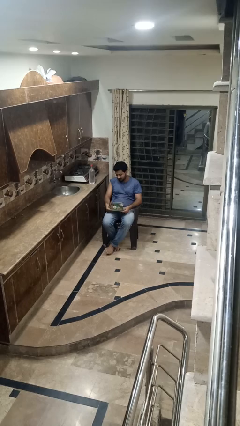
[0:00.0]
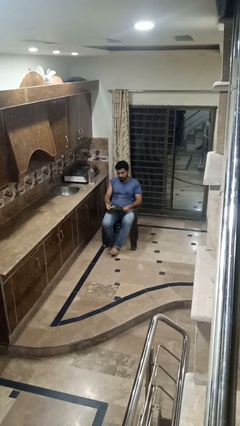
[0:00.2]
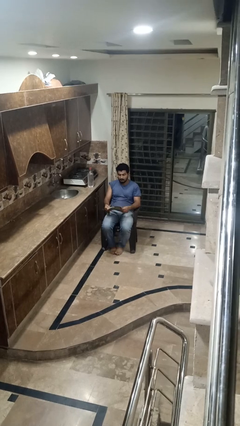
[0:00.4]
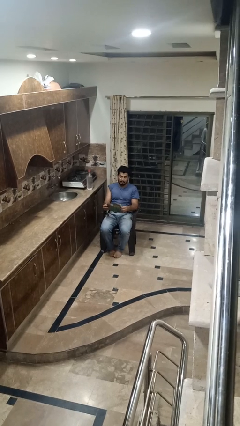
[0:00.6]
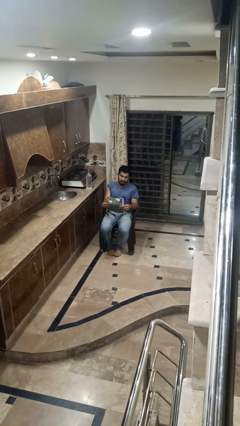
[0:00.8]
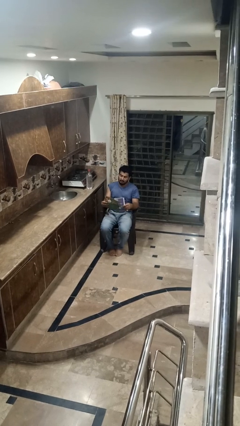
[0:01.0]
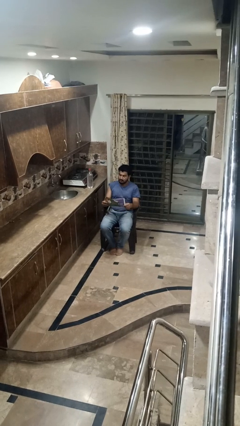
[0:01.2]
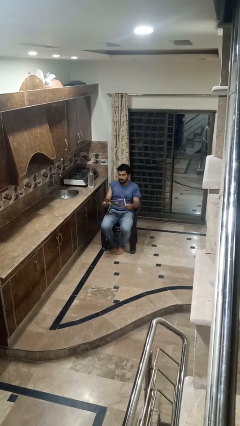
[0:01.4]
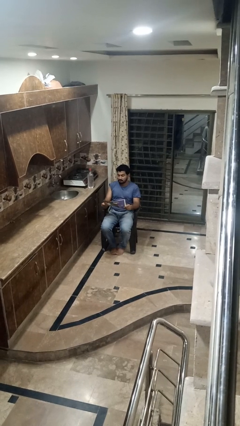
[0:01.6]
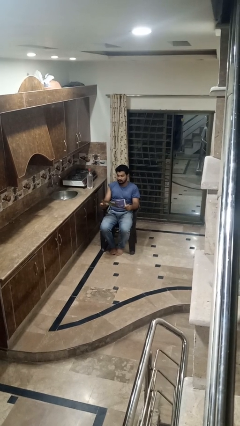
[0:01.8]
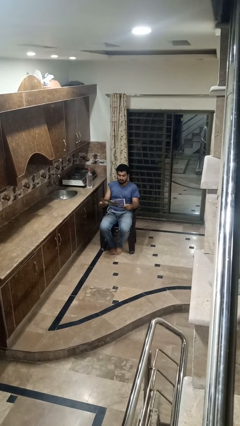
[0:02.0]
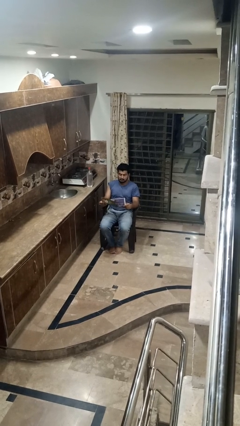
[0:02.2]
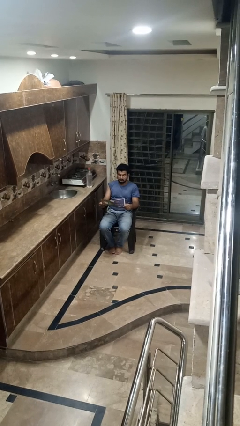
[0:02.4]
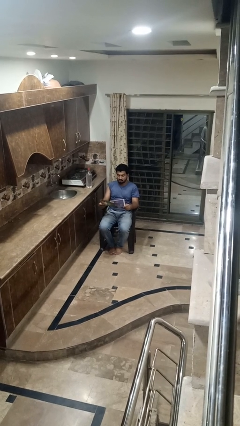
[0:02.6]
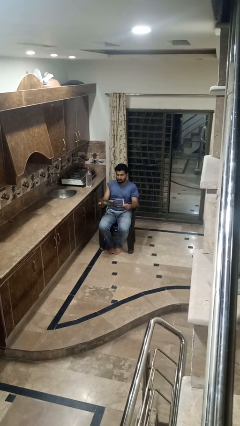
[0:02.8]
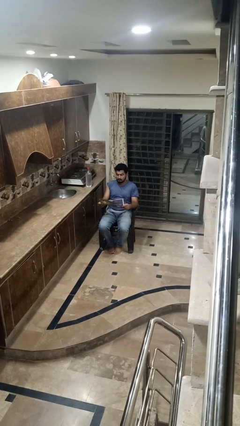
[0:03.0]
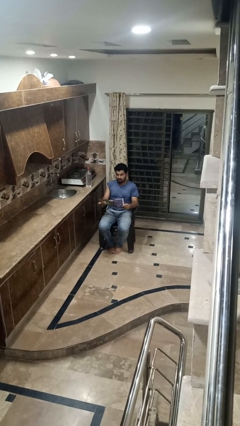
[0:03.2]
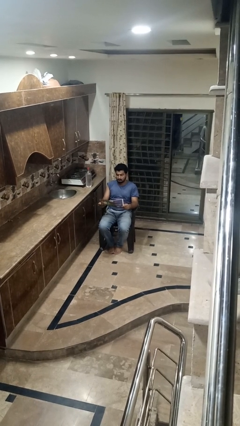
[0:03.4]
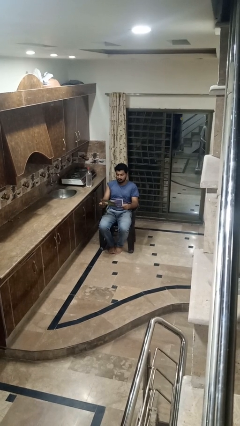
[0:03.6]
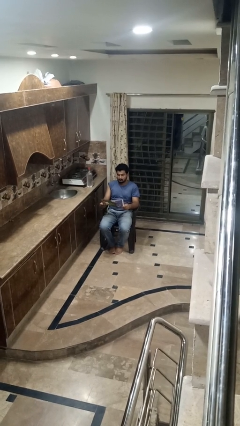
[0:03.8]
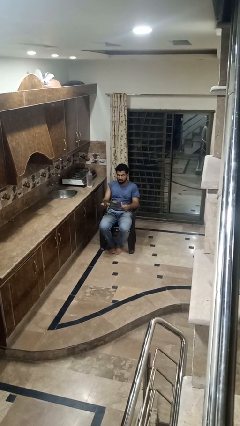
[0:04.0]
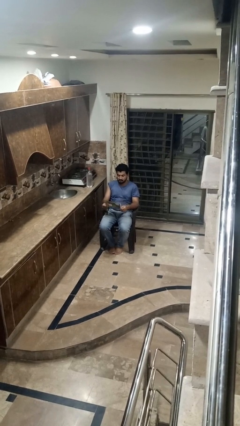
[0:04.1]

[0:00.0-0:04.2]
person reads newspaper

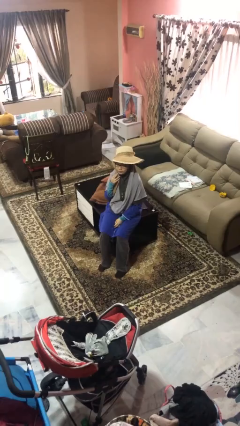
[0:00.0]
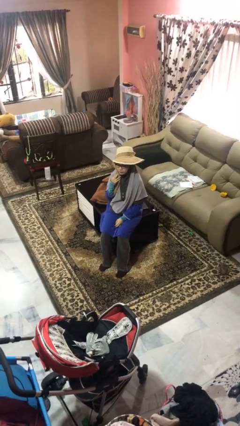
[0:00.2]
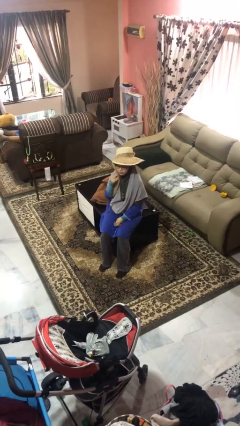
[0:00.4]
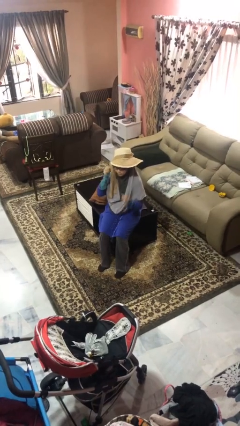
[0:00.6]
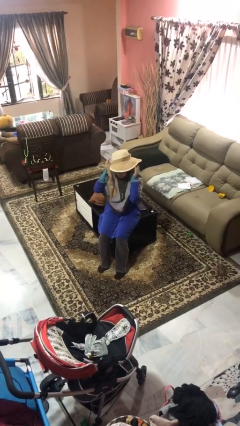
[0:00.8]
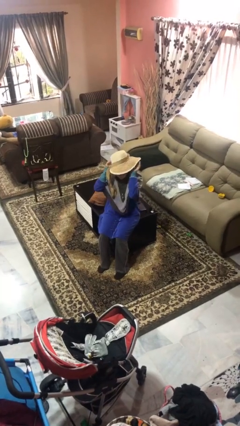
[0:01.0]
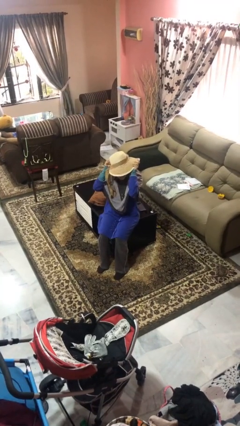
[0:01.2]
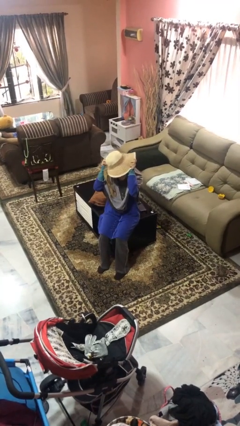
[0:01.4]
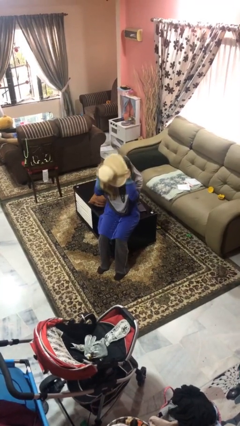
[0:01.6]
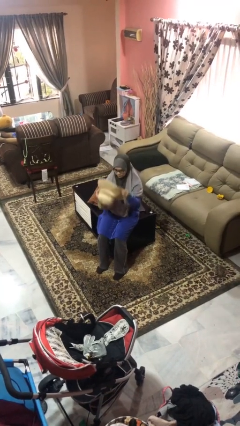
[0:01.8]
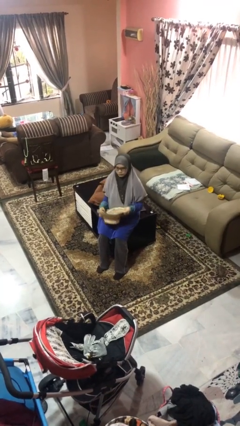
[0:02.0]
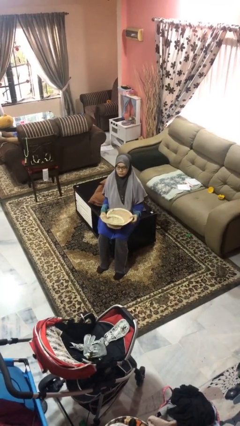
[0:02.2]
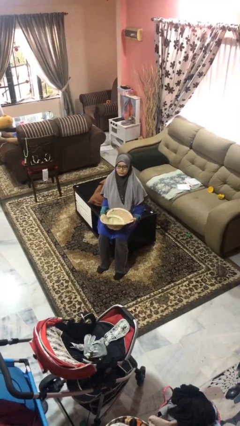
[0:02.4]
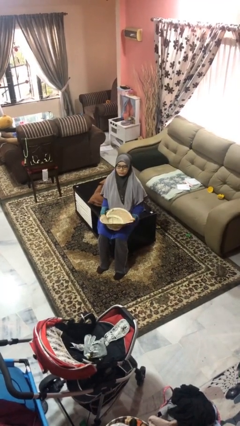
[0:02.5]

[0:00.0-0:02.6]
person takes off hat

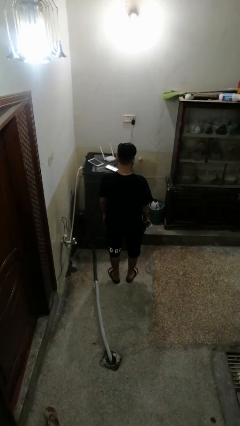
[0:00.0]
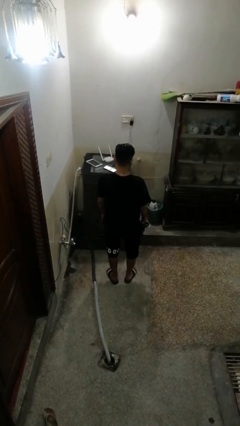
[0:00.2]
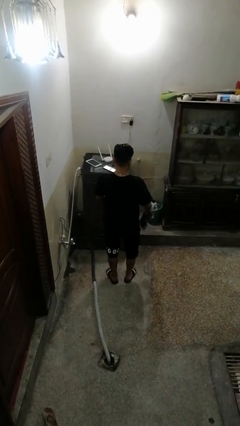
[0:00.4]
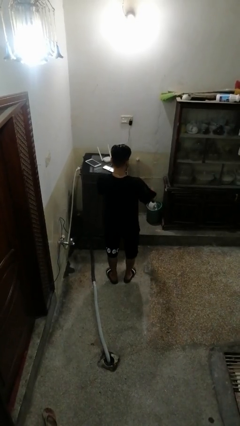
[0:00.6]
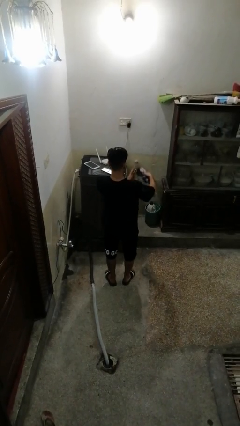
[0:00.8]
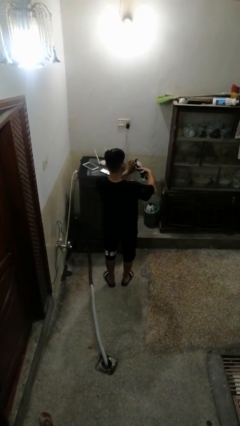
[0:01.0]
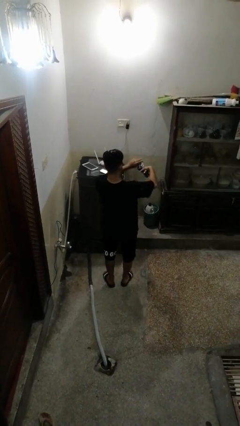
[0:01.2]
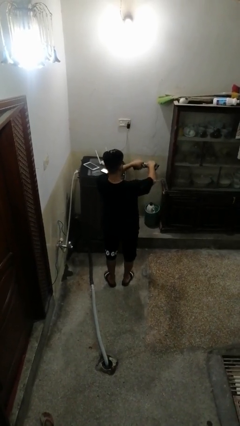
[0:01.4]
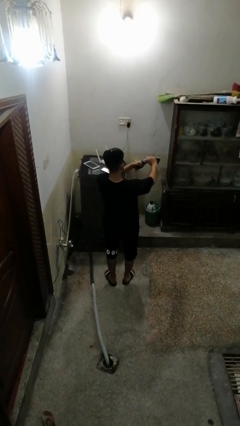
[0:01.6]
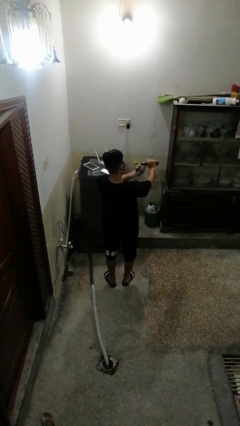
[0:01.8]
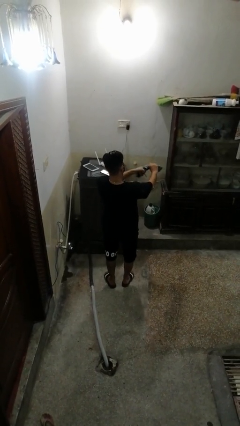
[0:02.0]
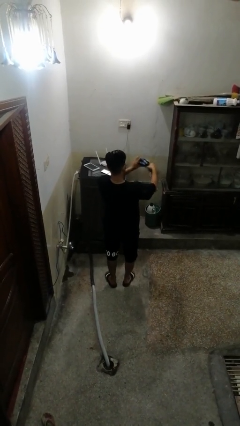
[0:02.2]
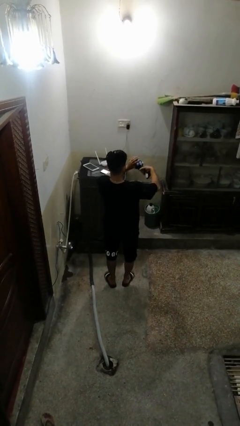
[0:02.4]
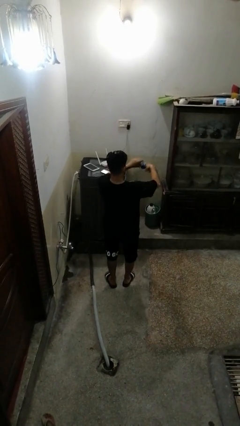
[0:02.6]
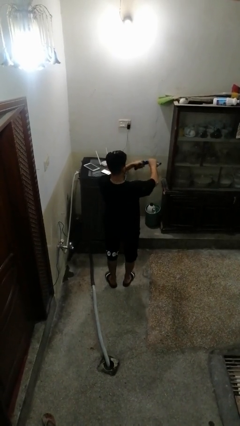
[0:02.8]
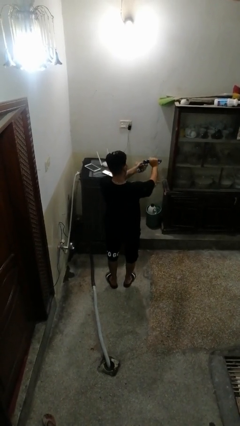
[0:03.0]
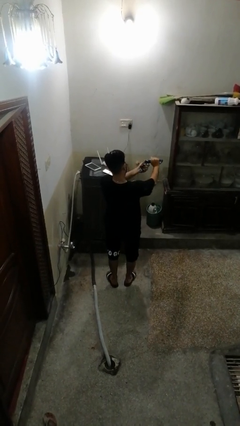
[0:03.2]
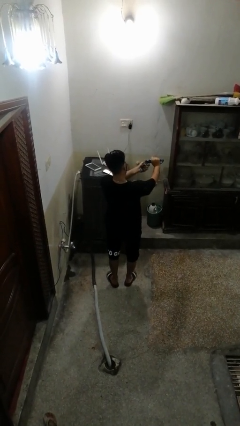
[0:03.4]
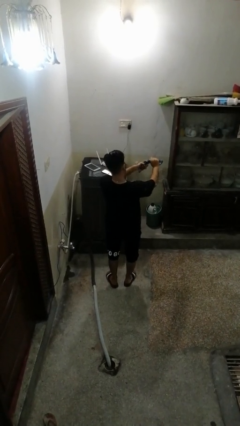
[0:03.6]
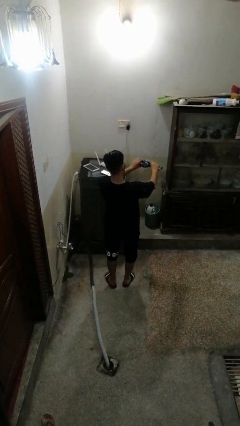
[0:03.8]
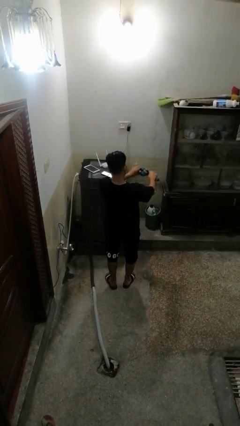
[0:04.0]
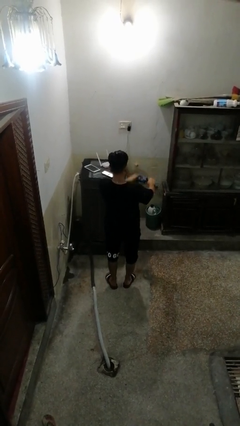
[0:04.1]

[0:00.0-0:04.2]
person squeezes object

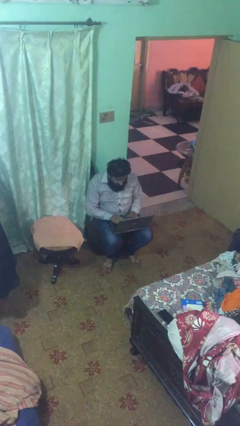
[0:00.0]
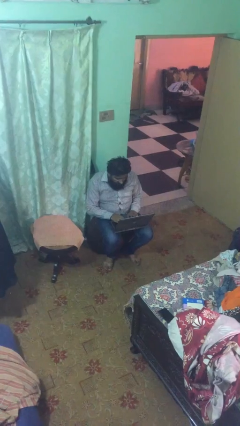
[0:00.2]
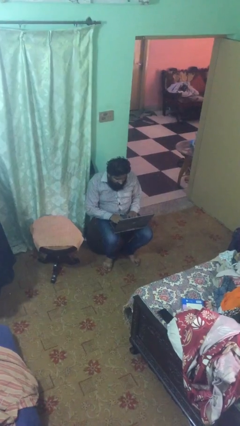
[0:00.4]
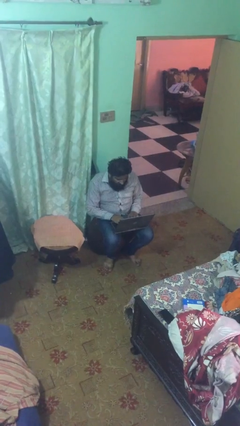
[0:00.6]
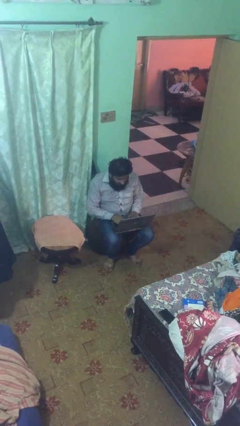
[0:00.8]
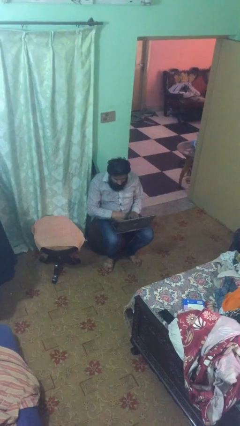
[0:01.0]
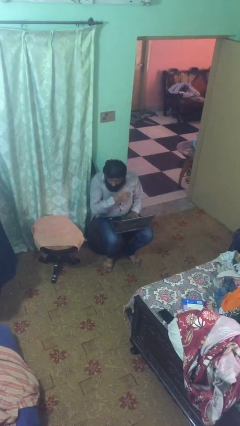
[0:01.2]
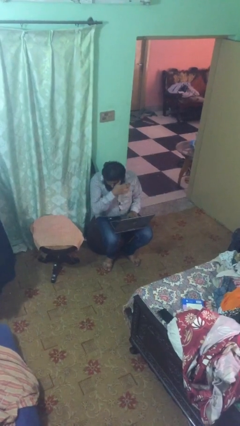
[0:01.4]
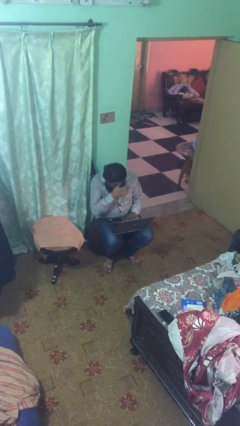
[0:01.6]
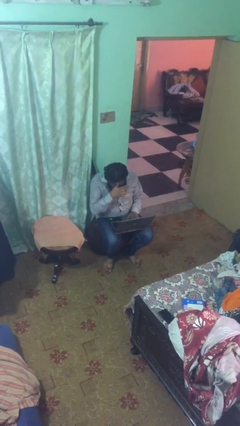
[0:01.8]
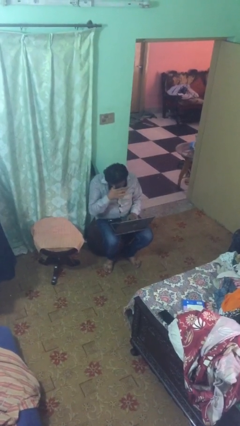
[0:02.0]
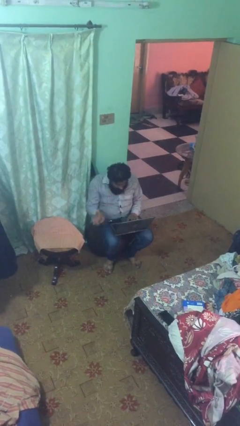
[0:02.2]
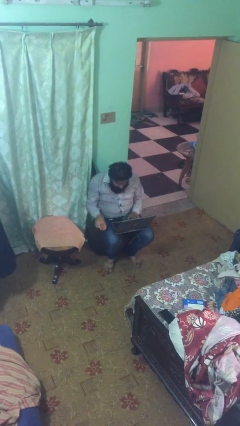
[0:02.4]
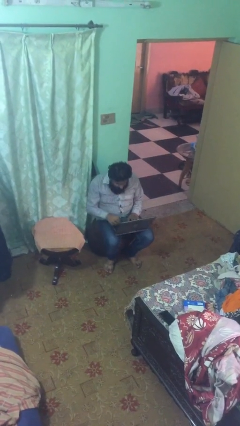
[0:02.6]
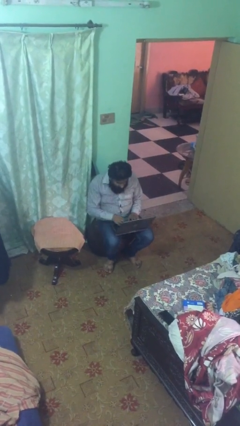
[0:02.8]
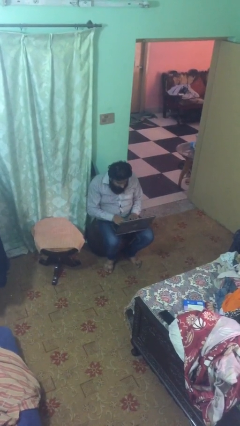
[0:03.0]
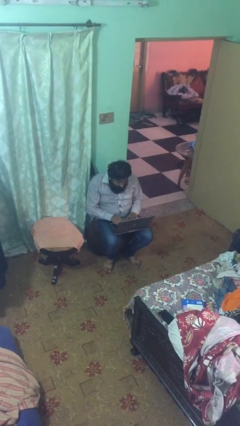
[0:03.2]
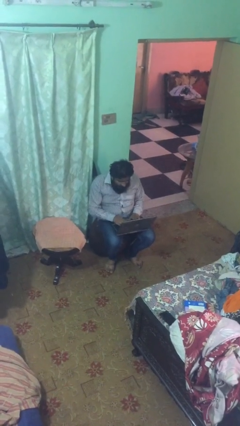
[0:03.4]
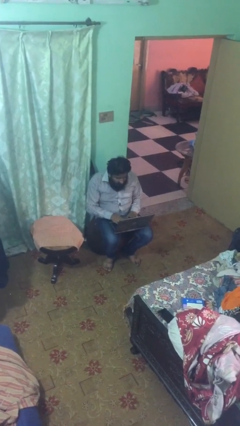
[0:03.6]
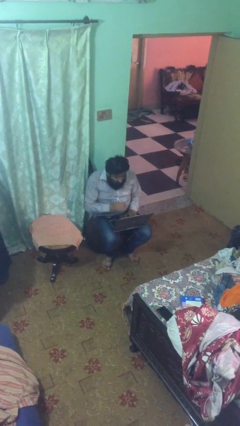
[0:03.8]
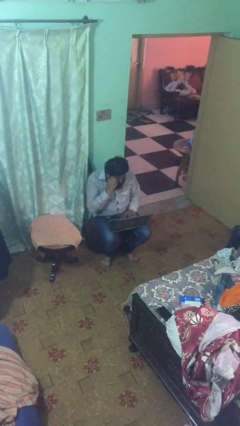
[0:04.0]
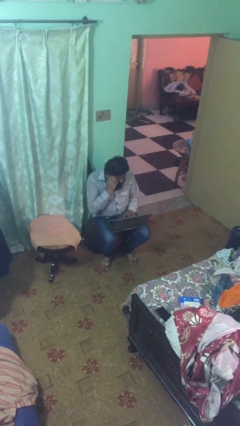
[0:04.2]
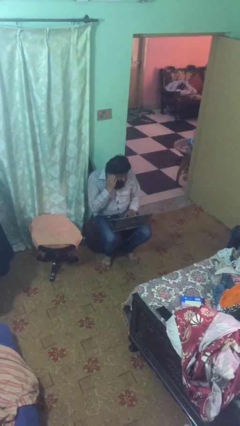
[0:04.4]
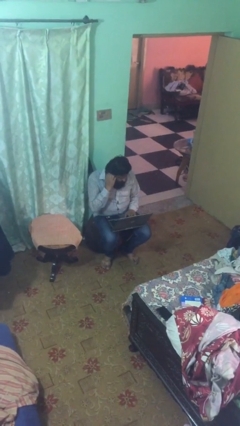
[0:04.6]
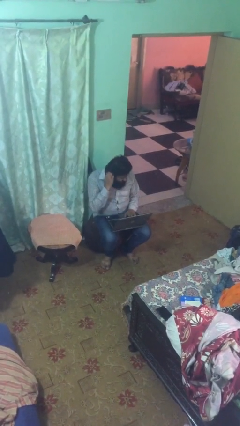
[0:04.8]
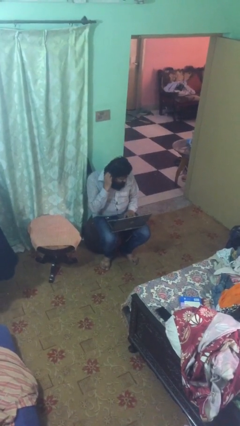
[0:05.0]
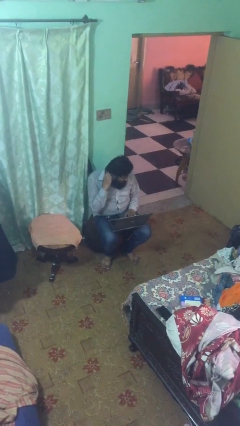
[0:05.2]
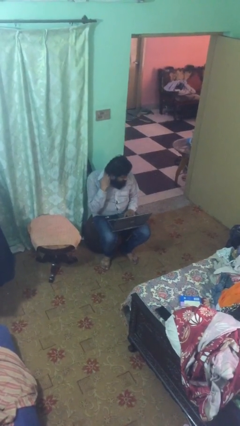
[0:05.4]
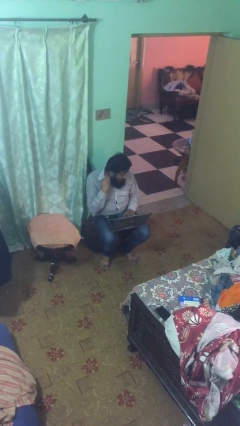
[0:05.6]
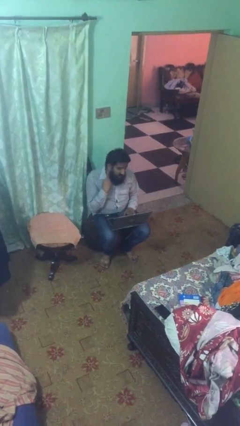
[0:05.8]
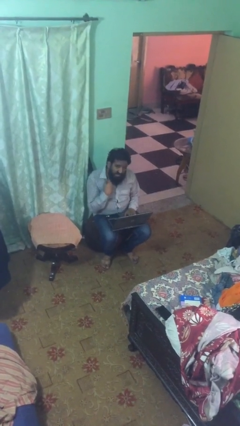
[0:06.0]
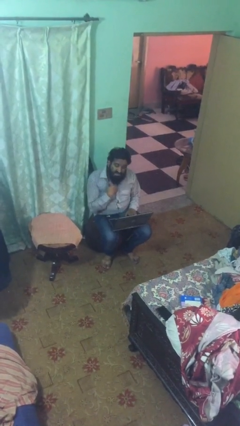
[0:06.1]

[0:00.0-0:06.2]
person interacts with laptop

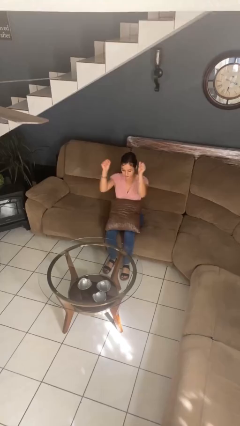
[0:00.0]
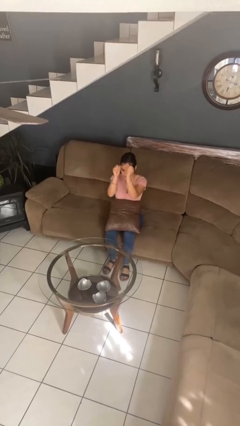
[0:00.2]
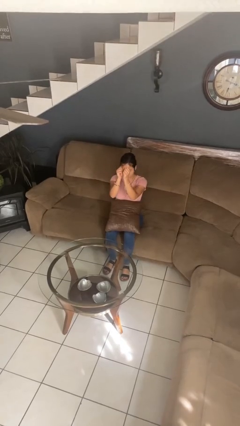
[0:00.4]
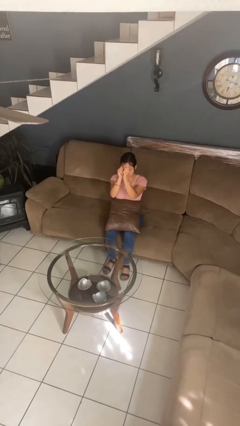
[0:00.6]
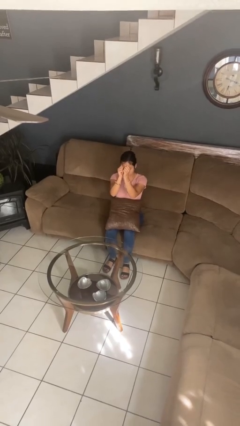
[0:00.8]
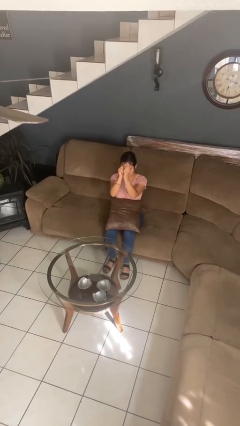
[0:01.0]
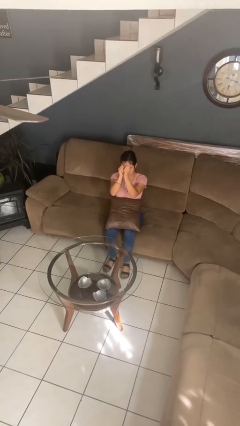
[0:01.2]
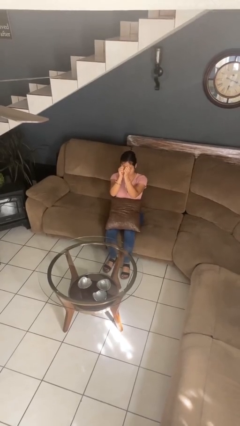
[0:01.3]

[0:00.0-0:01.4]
person gestures zoom out
